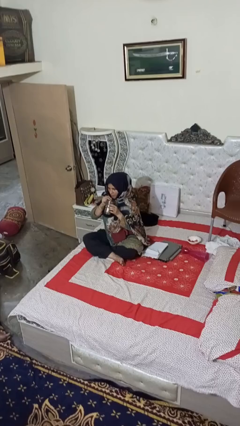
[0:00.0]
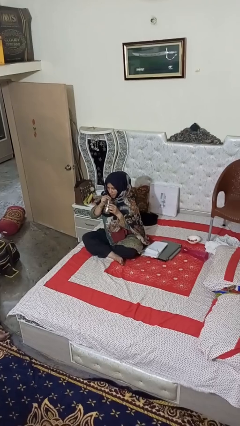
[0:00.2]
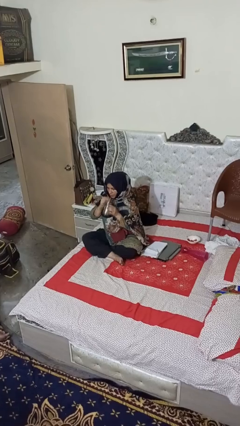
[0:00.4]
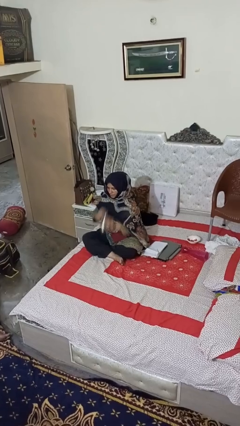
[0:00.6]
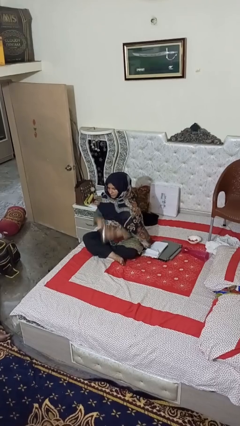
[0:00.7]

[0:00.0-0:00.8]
person drinks from straw

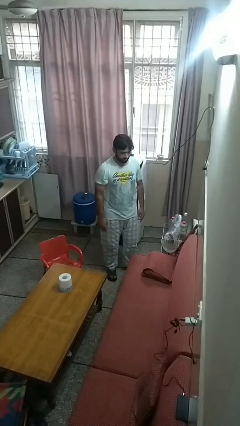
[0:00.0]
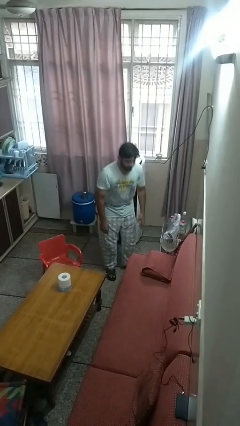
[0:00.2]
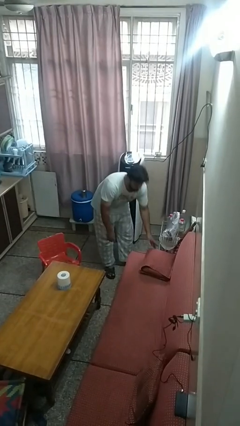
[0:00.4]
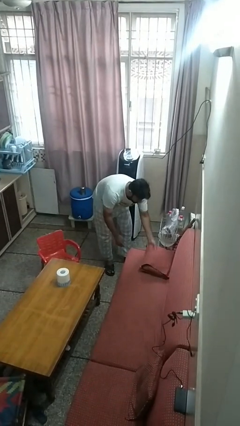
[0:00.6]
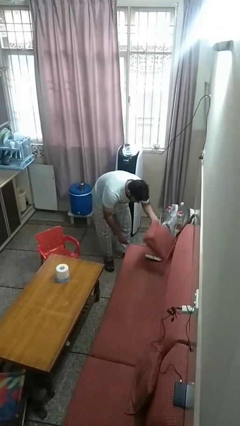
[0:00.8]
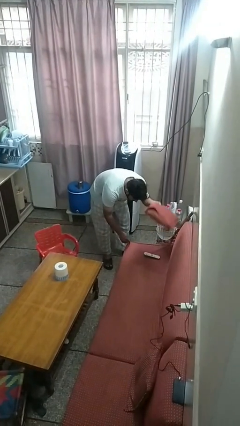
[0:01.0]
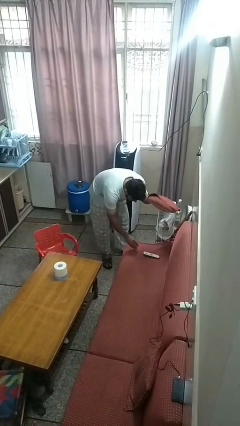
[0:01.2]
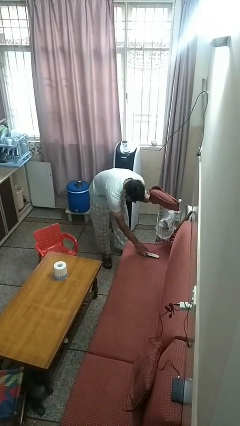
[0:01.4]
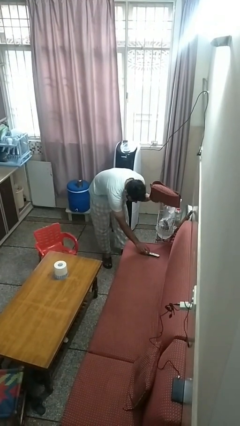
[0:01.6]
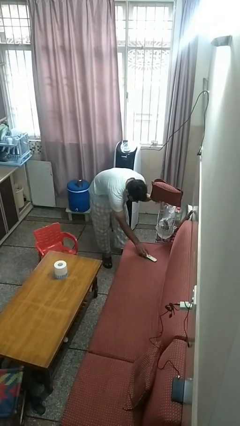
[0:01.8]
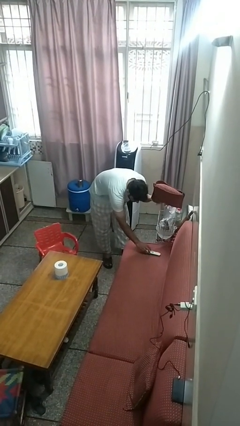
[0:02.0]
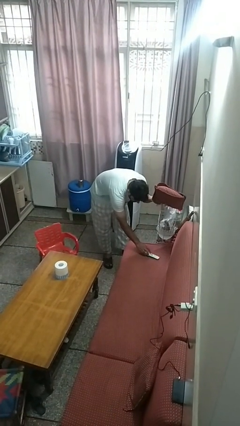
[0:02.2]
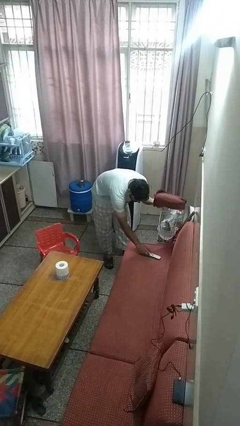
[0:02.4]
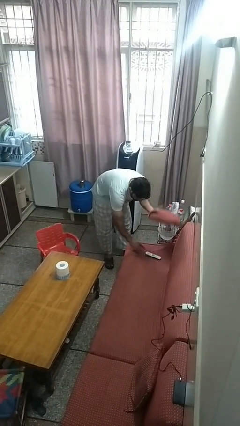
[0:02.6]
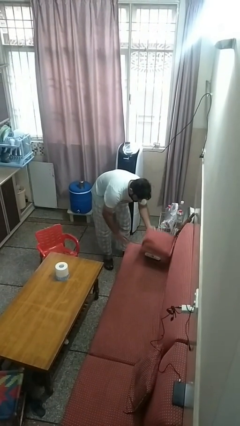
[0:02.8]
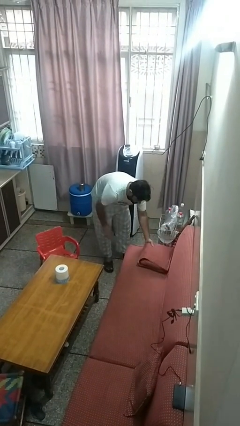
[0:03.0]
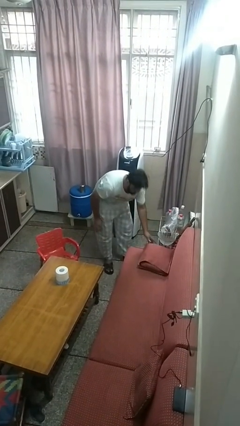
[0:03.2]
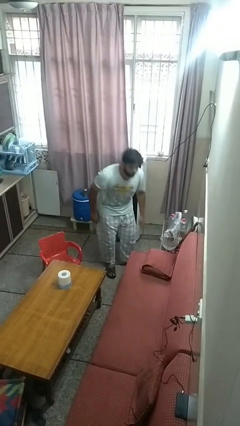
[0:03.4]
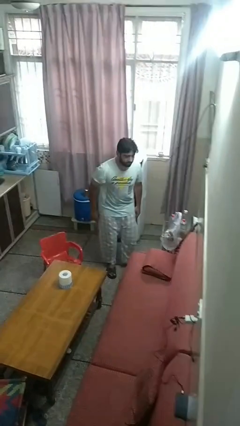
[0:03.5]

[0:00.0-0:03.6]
person searches in couch

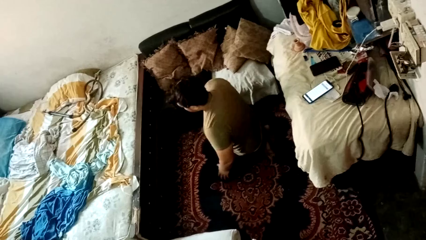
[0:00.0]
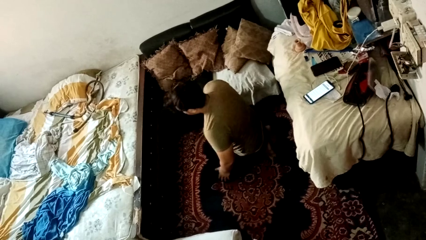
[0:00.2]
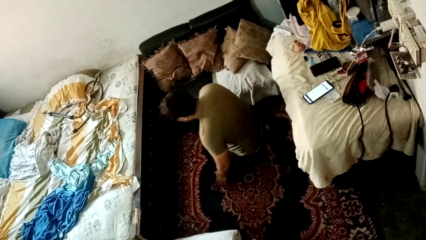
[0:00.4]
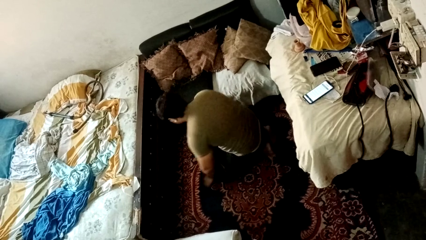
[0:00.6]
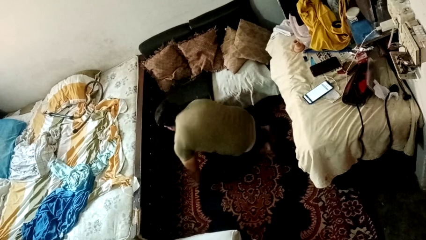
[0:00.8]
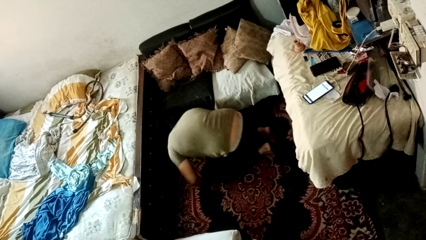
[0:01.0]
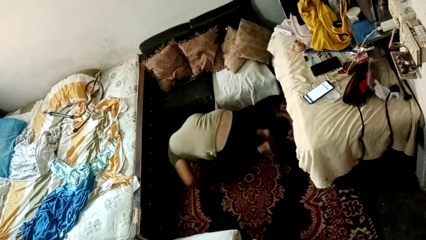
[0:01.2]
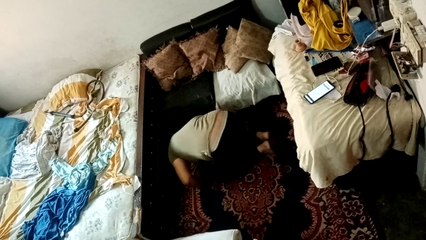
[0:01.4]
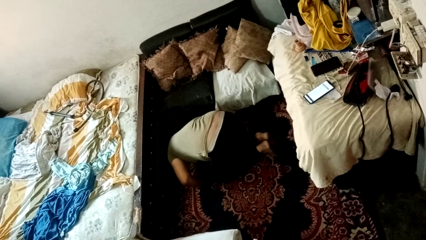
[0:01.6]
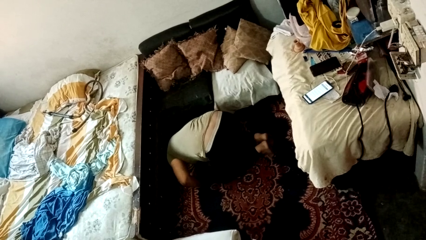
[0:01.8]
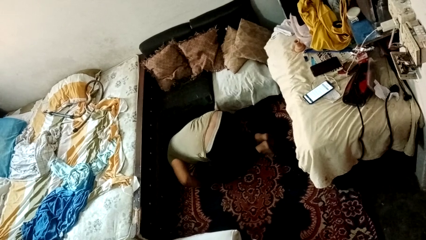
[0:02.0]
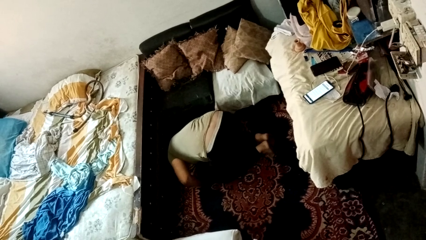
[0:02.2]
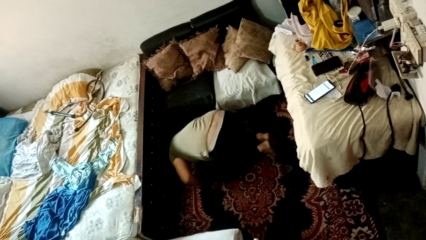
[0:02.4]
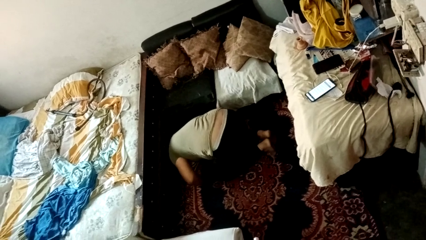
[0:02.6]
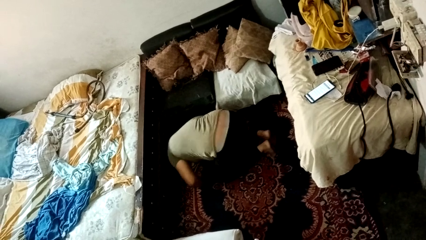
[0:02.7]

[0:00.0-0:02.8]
person searches under bed

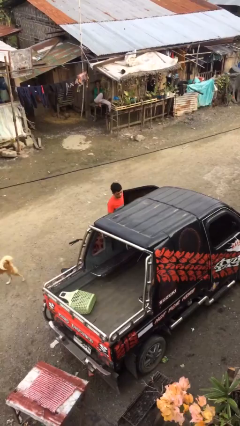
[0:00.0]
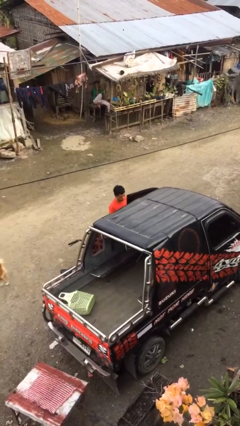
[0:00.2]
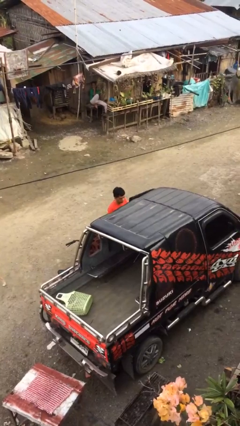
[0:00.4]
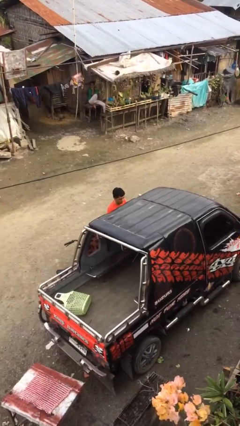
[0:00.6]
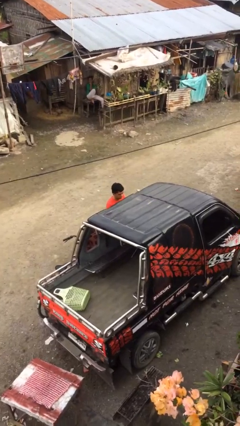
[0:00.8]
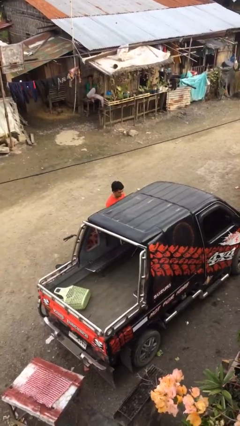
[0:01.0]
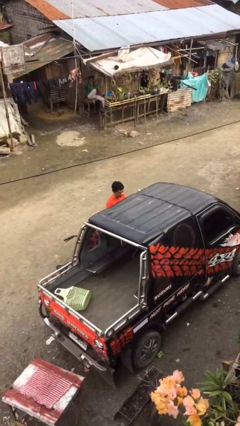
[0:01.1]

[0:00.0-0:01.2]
person closes car door

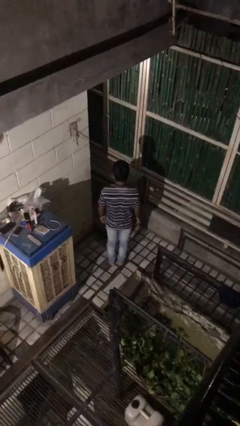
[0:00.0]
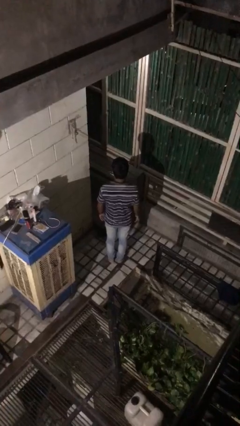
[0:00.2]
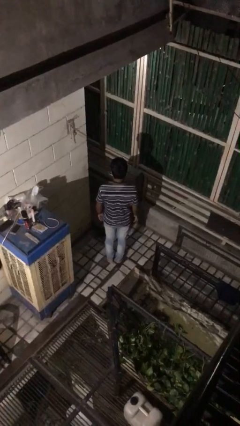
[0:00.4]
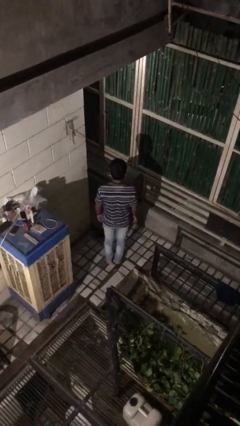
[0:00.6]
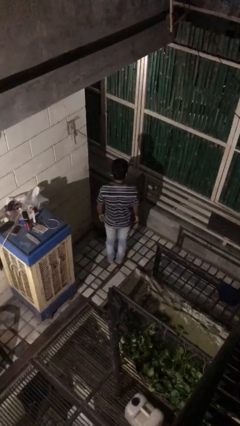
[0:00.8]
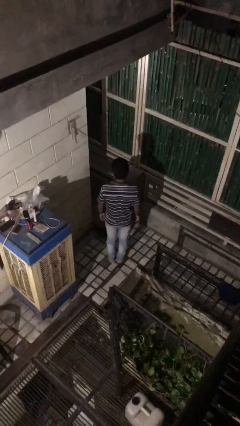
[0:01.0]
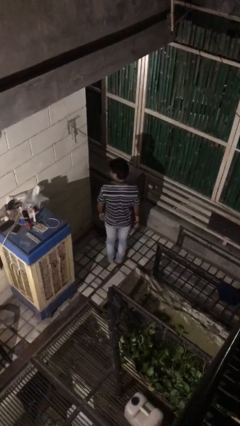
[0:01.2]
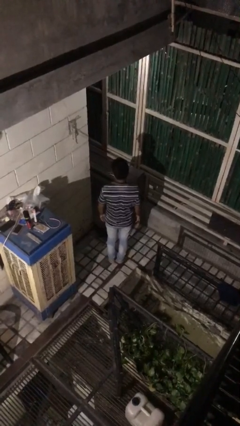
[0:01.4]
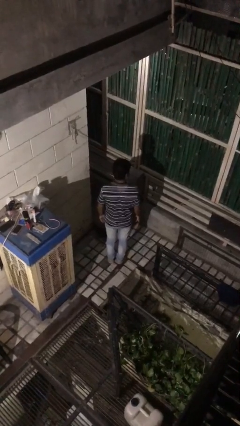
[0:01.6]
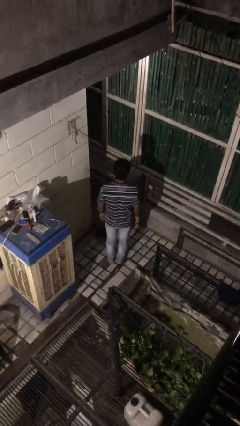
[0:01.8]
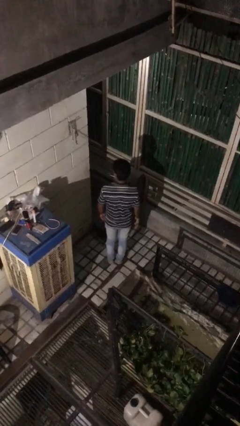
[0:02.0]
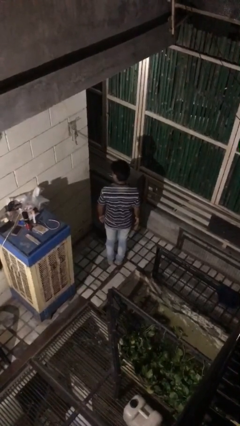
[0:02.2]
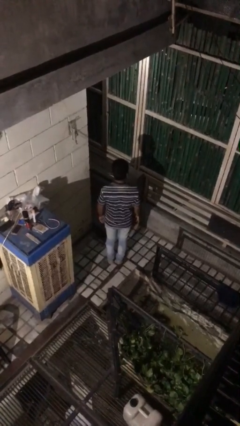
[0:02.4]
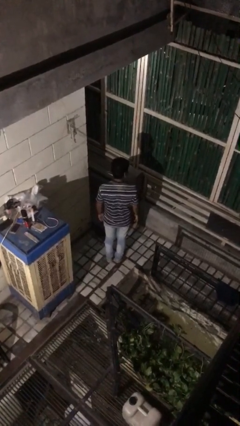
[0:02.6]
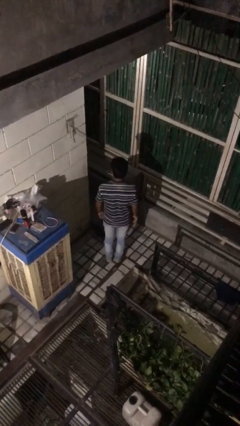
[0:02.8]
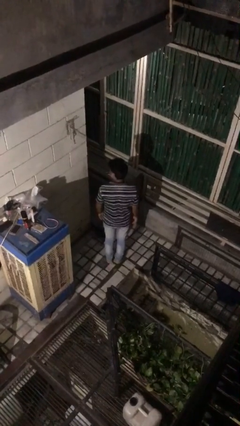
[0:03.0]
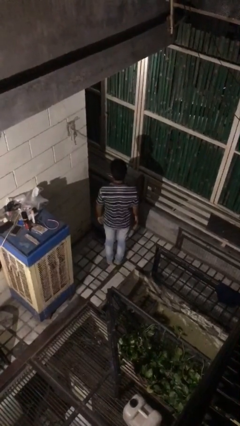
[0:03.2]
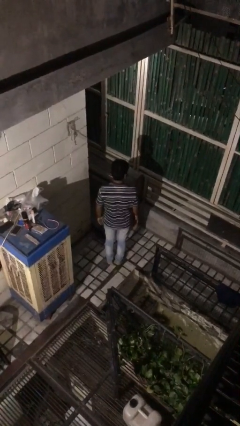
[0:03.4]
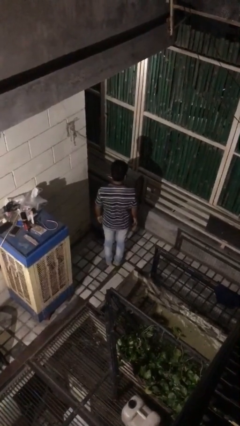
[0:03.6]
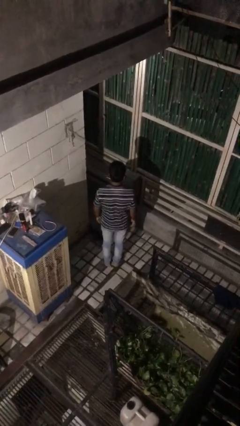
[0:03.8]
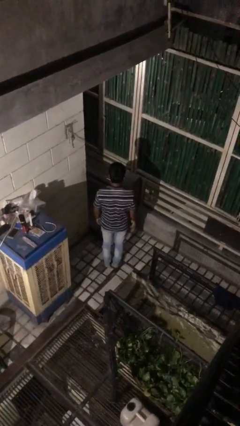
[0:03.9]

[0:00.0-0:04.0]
person shakes head

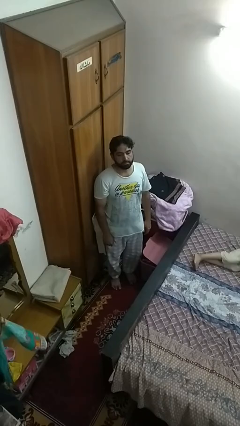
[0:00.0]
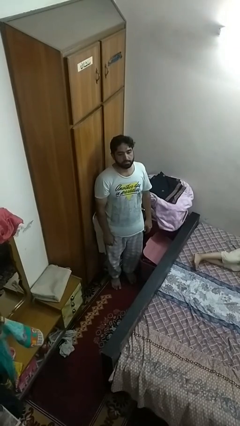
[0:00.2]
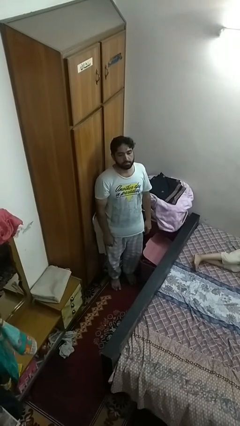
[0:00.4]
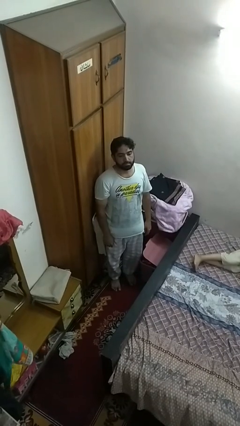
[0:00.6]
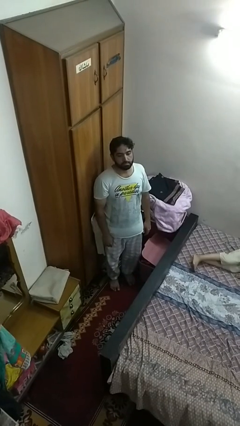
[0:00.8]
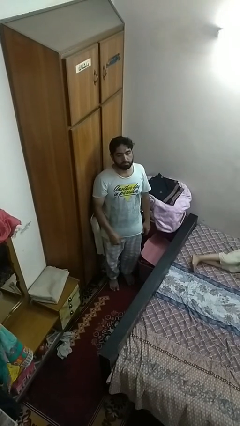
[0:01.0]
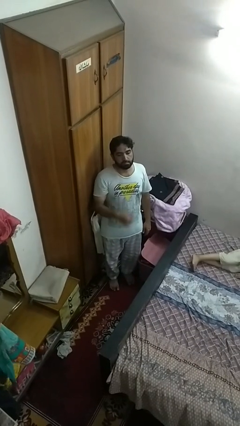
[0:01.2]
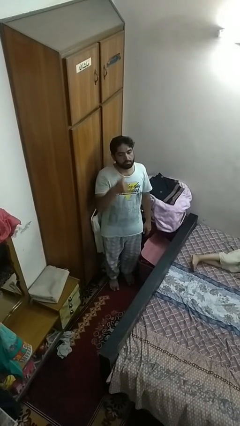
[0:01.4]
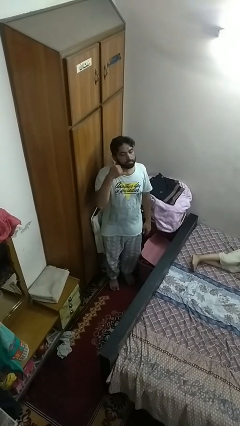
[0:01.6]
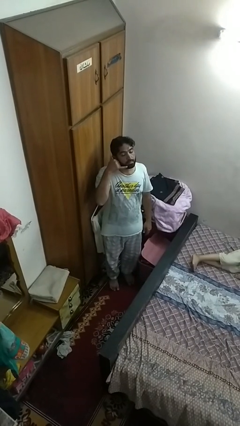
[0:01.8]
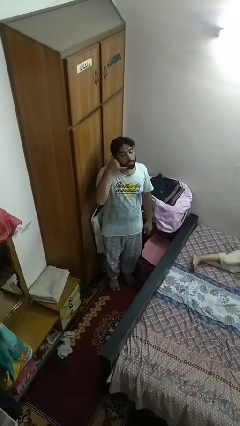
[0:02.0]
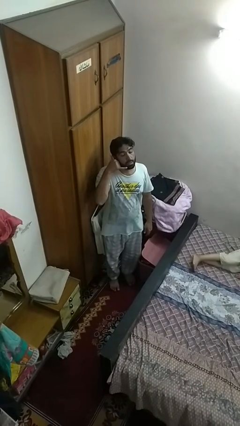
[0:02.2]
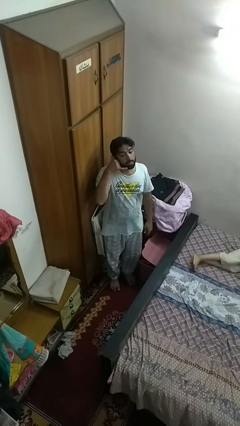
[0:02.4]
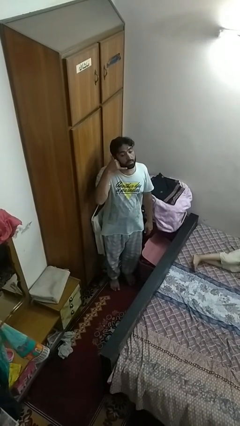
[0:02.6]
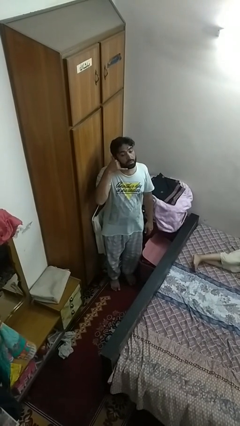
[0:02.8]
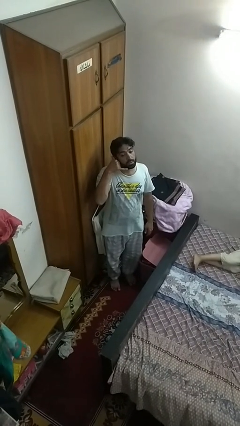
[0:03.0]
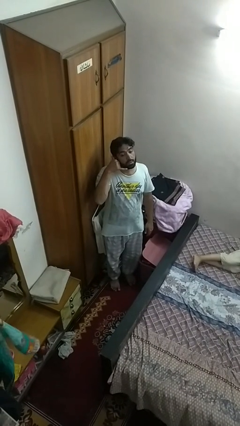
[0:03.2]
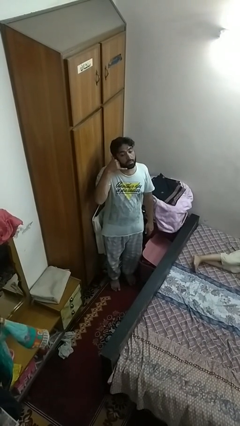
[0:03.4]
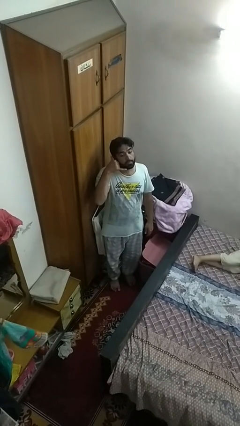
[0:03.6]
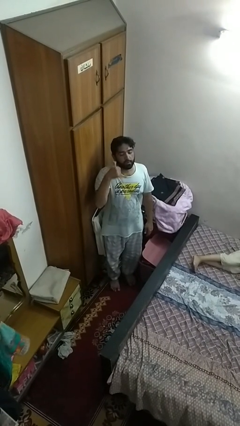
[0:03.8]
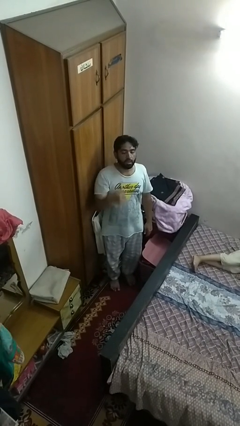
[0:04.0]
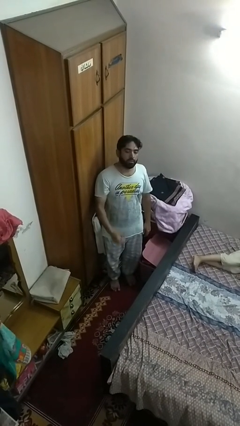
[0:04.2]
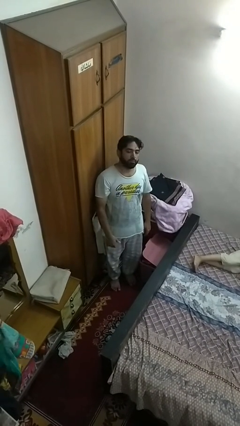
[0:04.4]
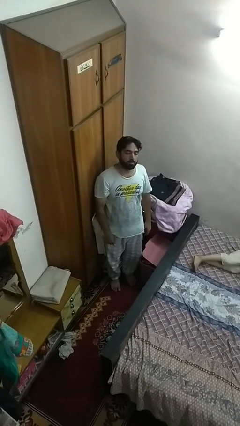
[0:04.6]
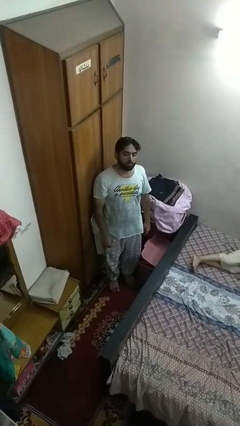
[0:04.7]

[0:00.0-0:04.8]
person gestures call me
